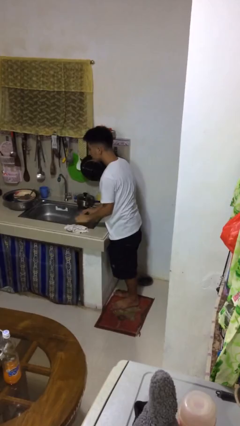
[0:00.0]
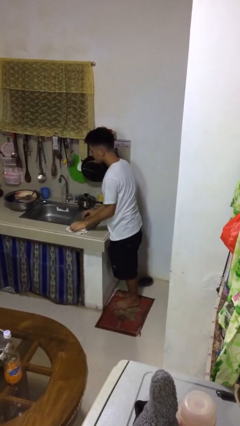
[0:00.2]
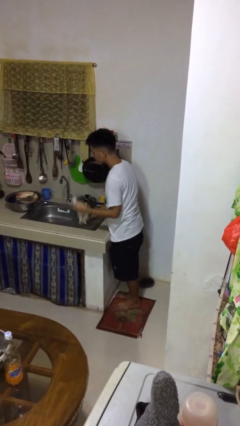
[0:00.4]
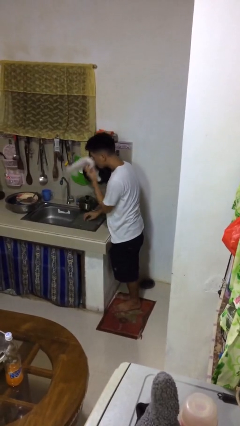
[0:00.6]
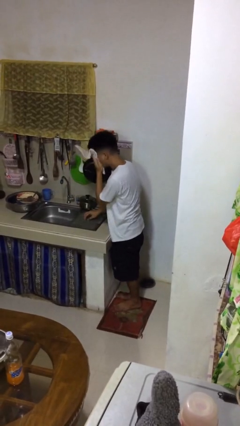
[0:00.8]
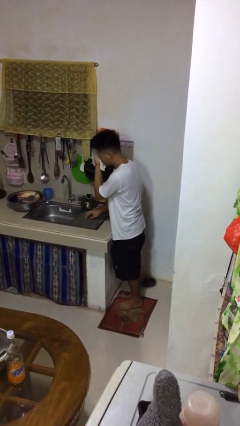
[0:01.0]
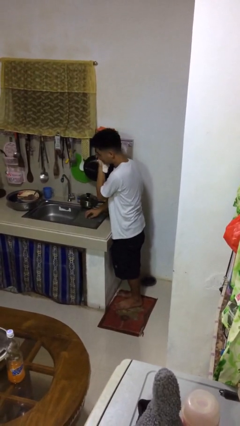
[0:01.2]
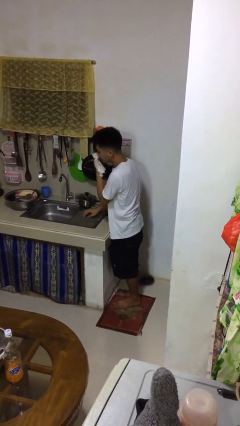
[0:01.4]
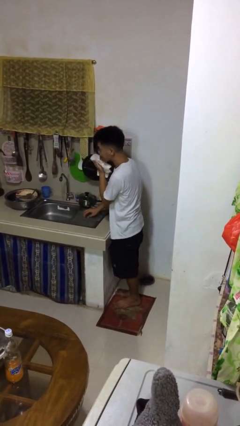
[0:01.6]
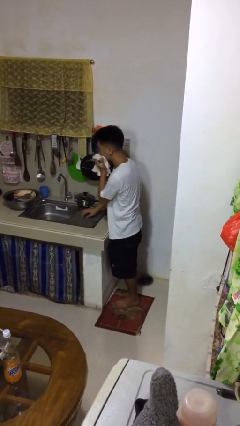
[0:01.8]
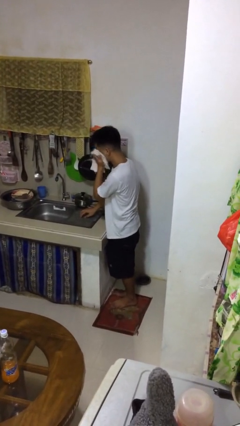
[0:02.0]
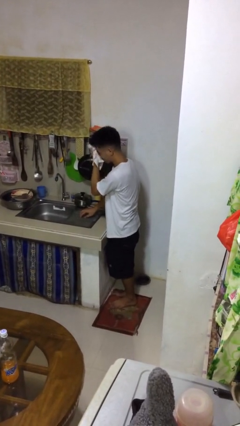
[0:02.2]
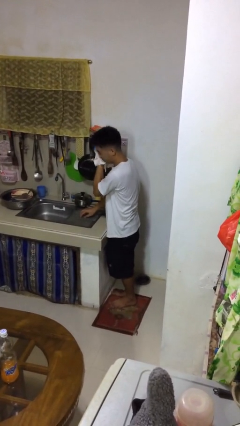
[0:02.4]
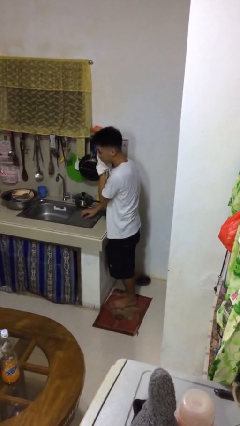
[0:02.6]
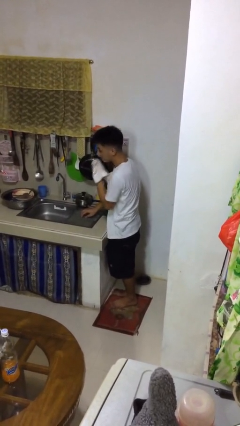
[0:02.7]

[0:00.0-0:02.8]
person dries face with towel

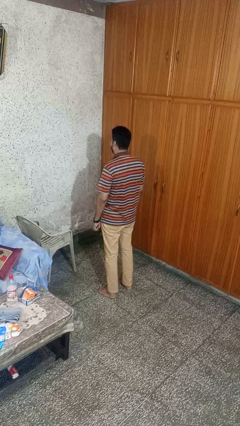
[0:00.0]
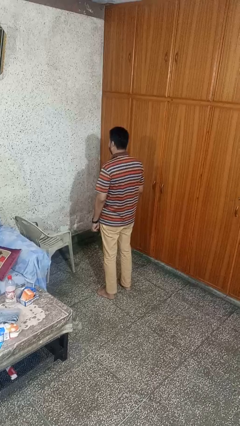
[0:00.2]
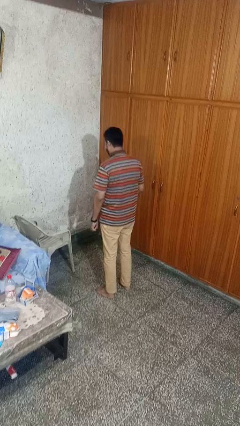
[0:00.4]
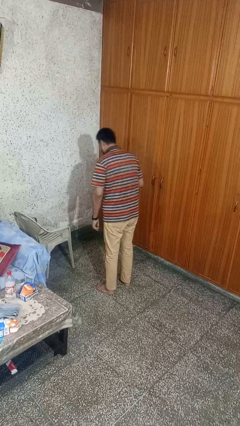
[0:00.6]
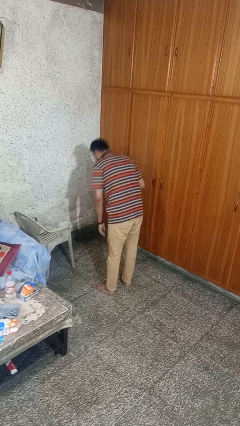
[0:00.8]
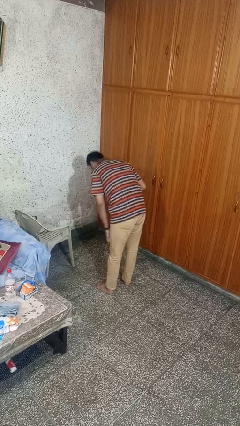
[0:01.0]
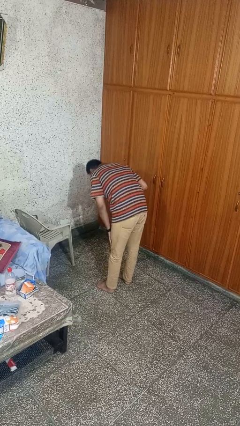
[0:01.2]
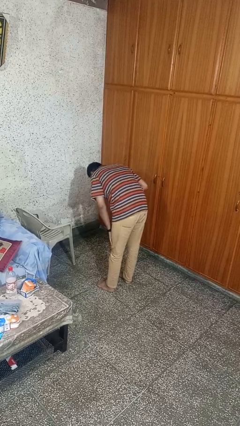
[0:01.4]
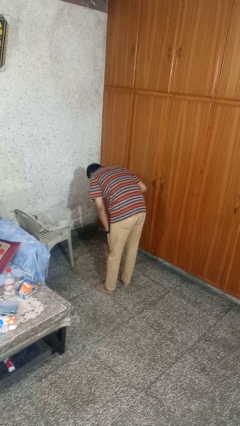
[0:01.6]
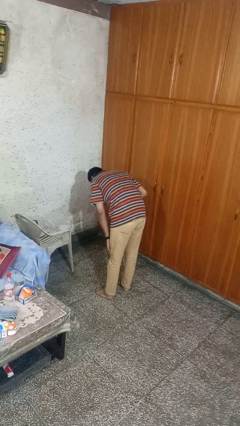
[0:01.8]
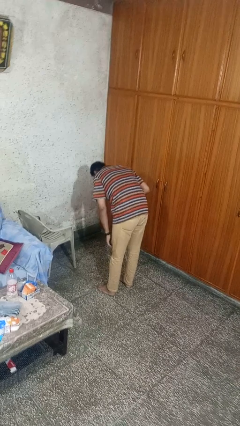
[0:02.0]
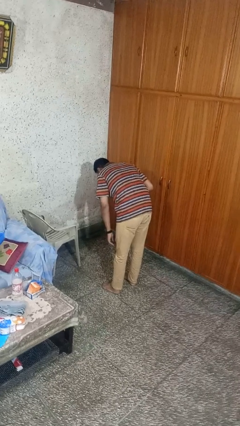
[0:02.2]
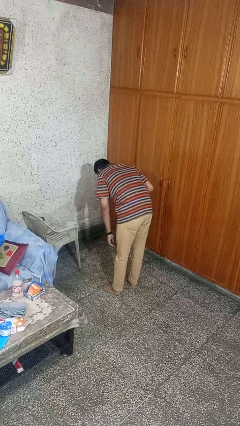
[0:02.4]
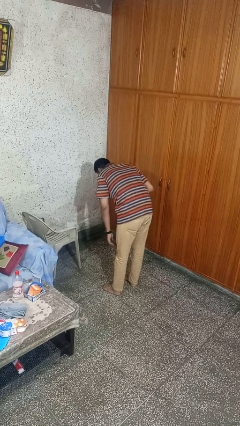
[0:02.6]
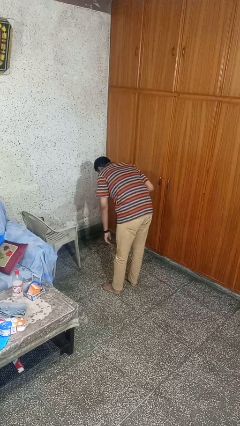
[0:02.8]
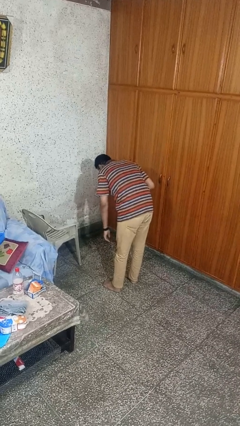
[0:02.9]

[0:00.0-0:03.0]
person bows

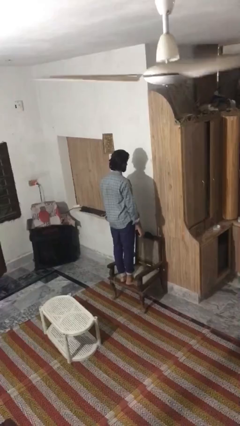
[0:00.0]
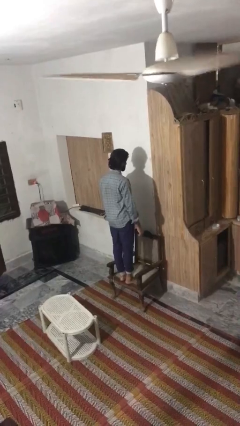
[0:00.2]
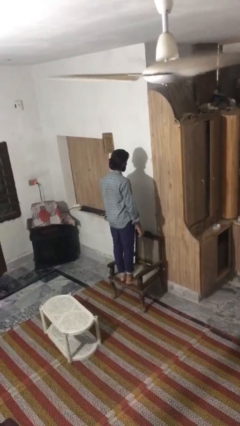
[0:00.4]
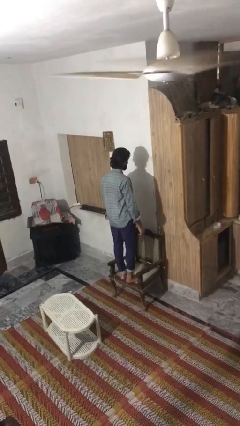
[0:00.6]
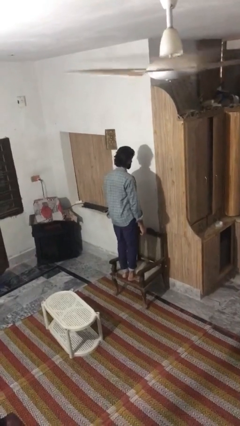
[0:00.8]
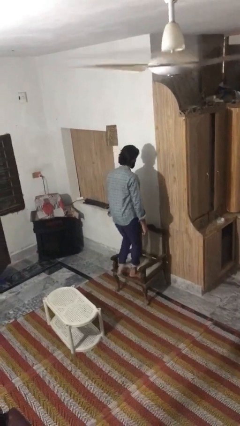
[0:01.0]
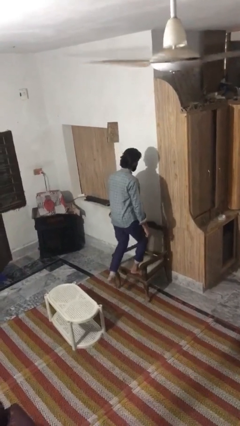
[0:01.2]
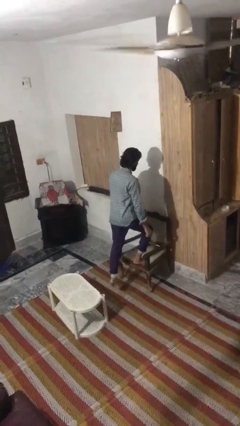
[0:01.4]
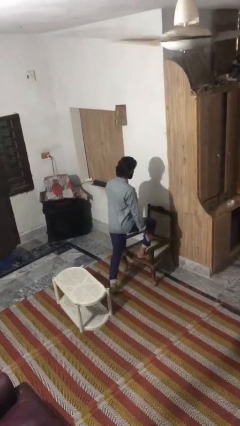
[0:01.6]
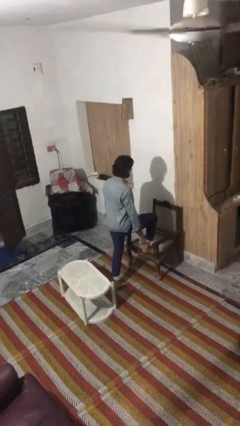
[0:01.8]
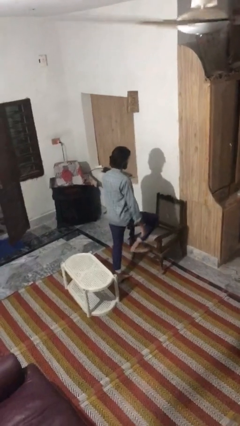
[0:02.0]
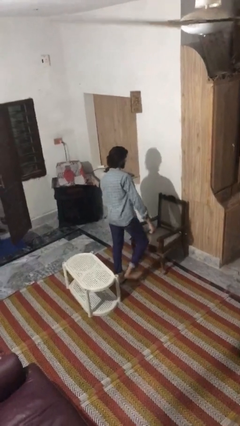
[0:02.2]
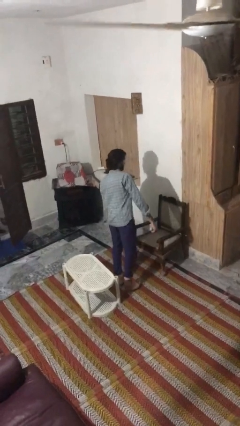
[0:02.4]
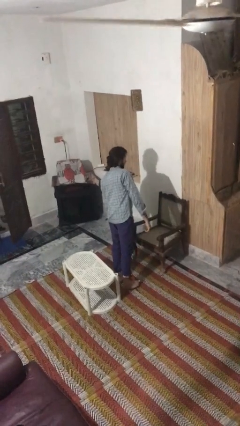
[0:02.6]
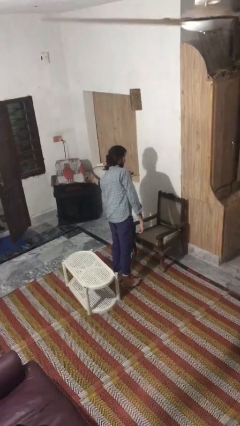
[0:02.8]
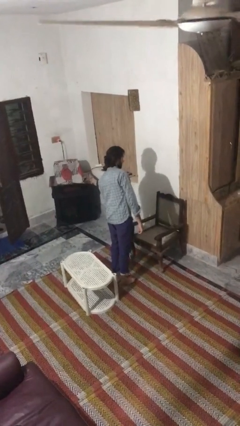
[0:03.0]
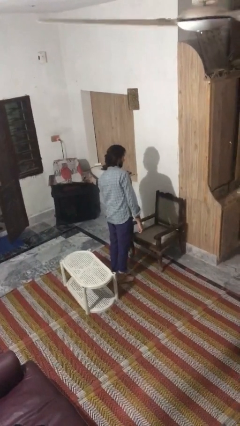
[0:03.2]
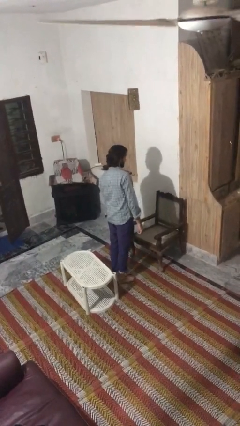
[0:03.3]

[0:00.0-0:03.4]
person climbs off chair

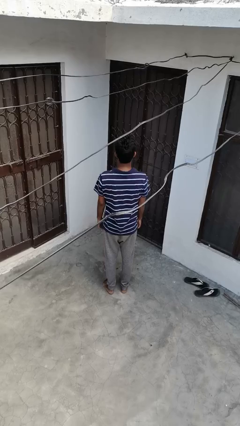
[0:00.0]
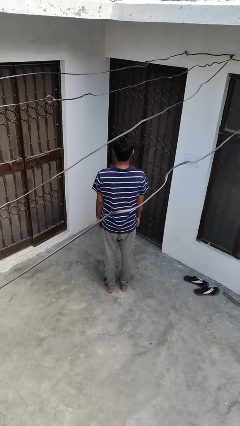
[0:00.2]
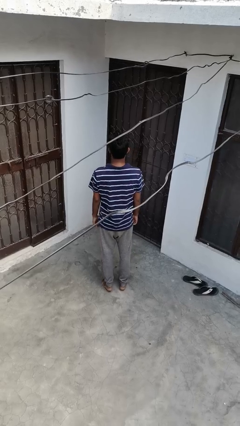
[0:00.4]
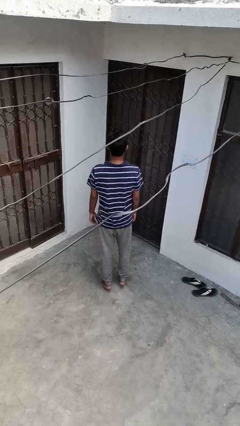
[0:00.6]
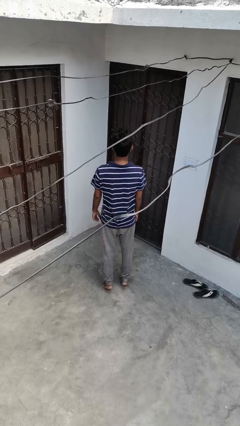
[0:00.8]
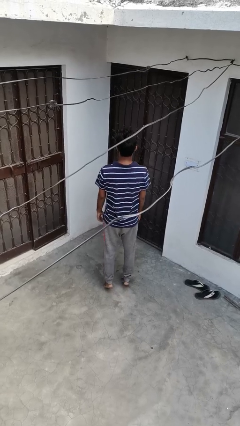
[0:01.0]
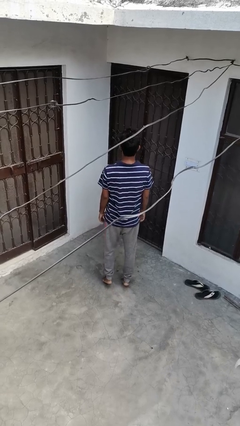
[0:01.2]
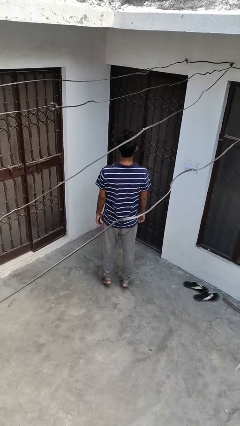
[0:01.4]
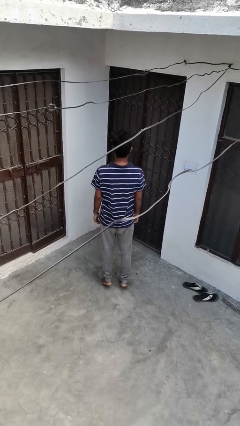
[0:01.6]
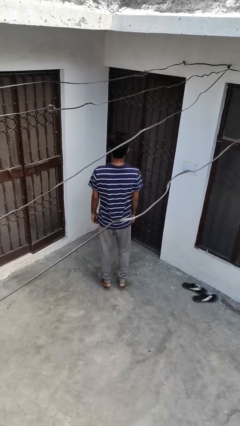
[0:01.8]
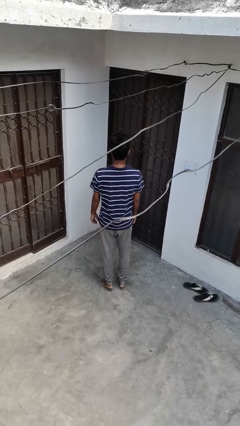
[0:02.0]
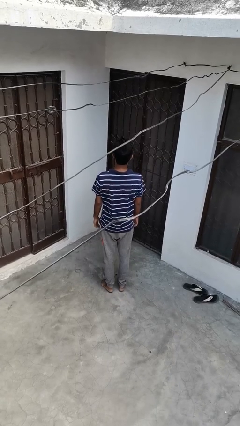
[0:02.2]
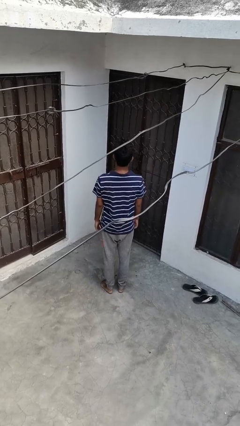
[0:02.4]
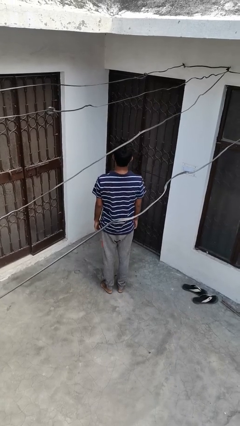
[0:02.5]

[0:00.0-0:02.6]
person walks tiptoe

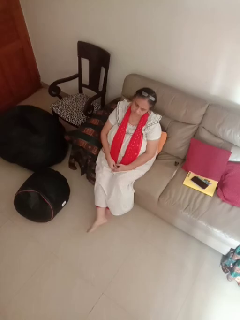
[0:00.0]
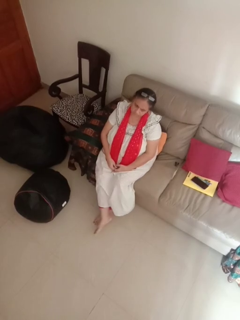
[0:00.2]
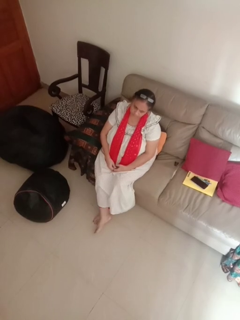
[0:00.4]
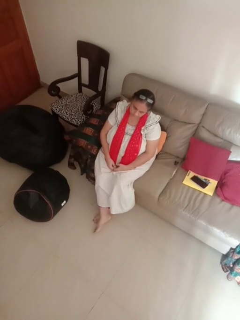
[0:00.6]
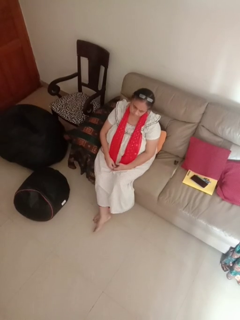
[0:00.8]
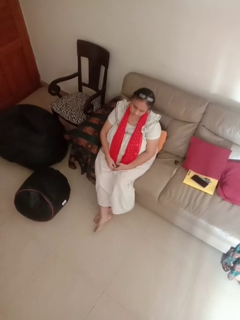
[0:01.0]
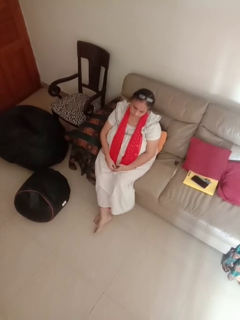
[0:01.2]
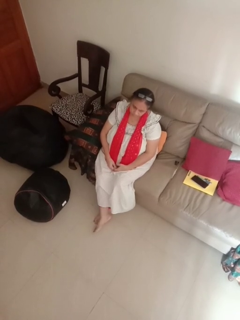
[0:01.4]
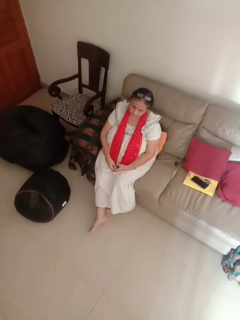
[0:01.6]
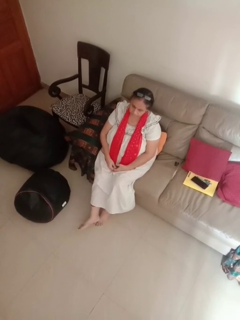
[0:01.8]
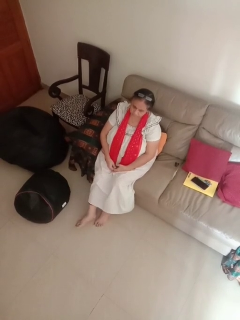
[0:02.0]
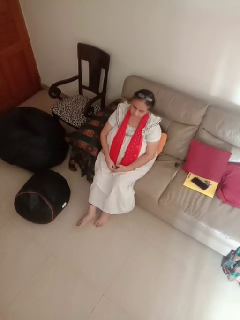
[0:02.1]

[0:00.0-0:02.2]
person crosses legs

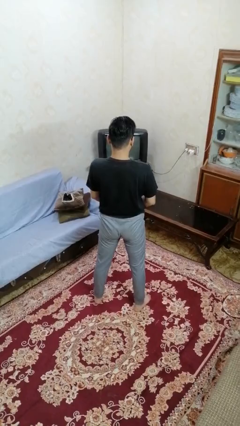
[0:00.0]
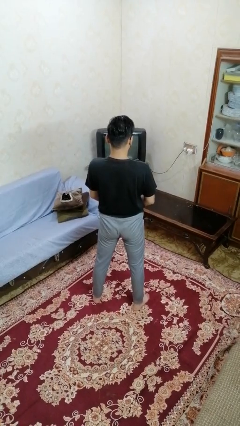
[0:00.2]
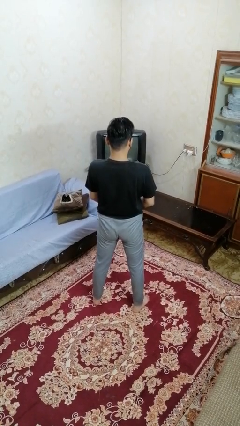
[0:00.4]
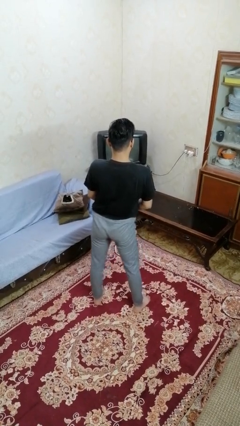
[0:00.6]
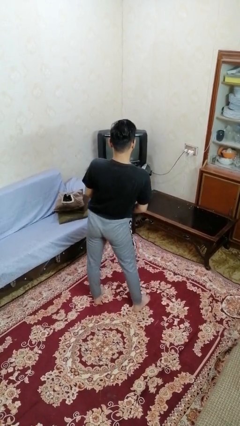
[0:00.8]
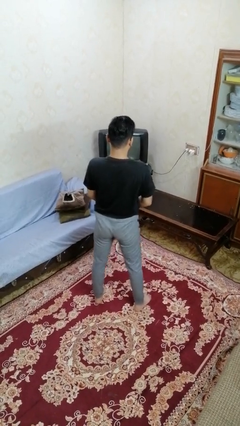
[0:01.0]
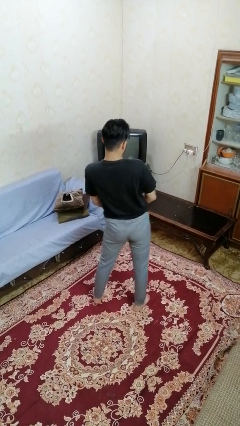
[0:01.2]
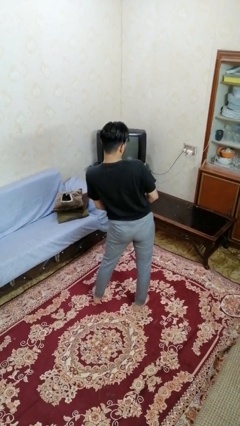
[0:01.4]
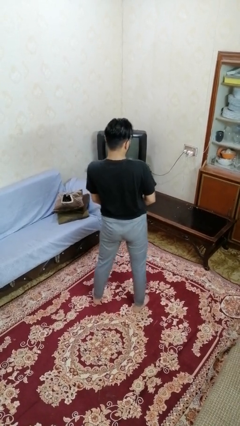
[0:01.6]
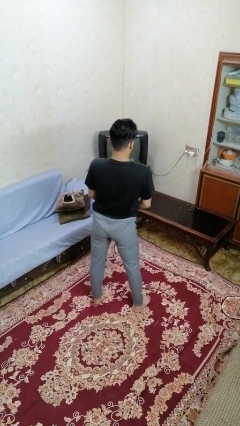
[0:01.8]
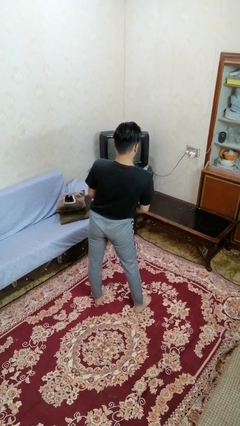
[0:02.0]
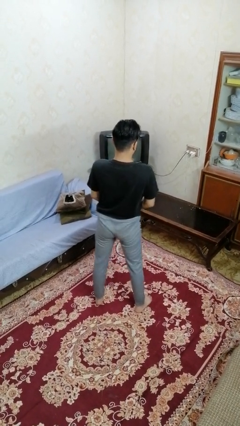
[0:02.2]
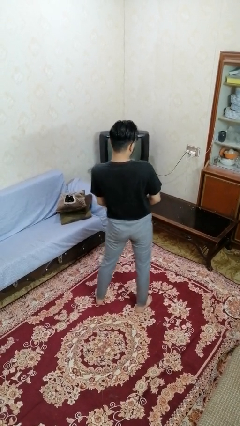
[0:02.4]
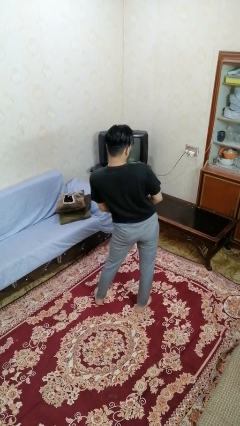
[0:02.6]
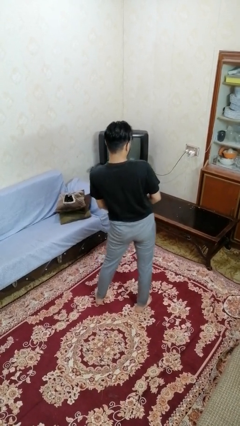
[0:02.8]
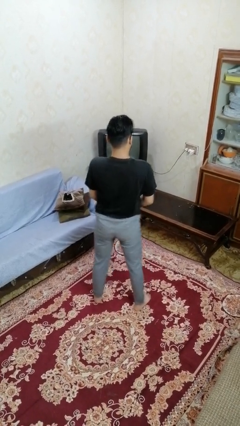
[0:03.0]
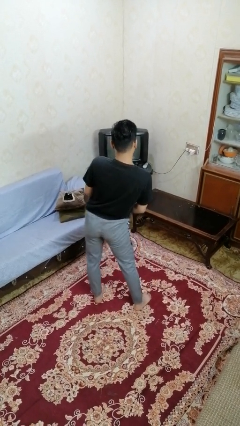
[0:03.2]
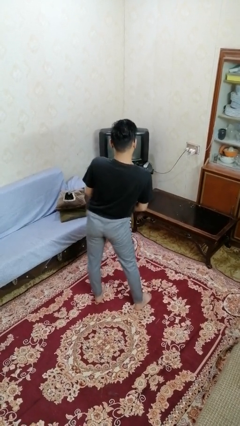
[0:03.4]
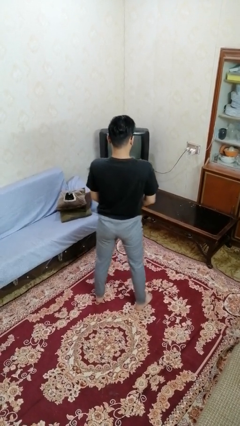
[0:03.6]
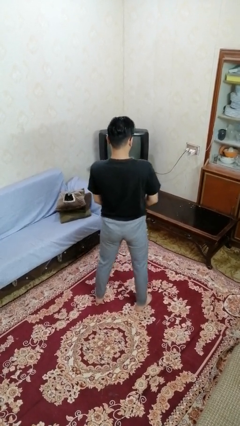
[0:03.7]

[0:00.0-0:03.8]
person wiggles hips

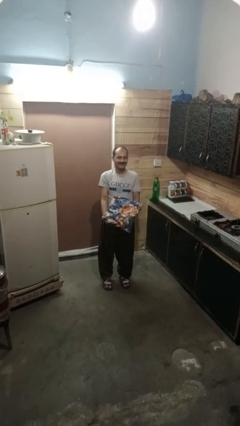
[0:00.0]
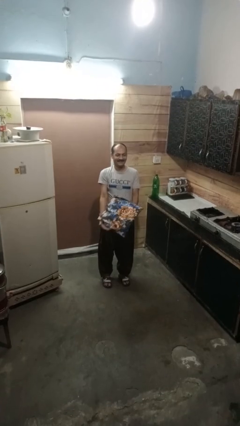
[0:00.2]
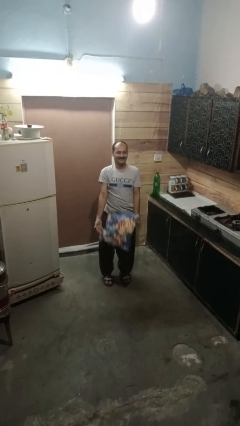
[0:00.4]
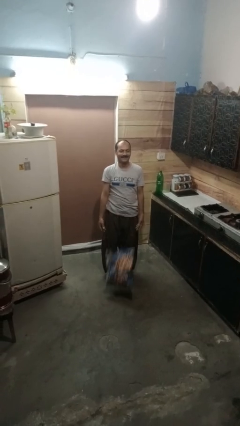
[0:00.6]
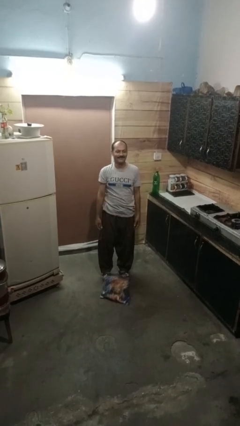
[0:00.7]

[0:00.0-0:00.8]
person catches dropped object
